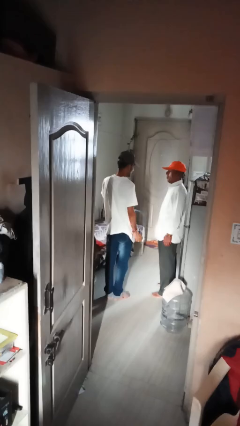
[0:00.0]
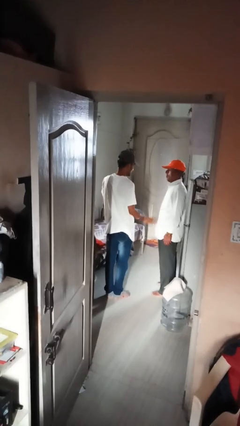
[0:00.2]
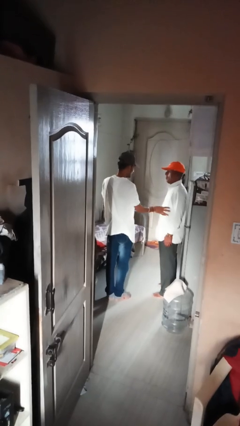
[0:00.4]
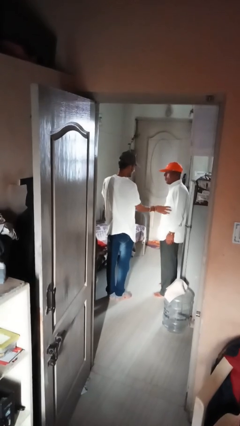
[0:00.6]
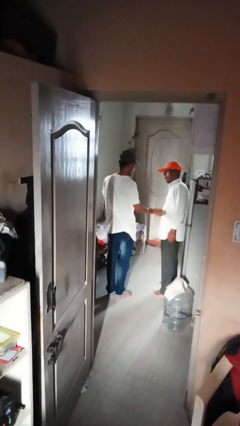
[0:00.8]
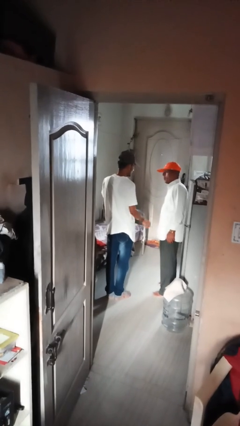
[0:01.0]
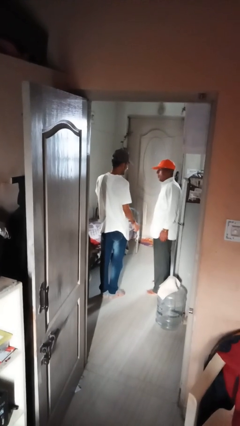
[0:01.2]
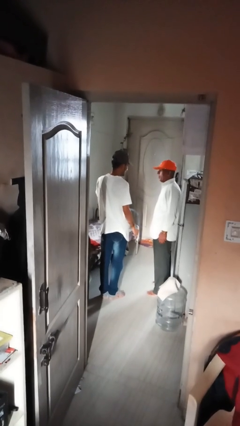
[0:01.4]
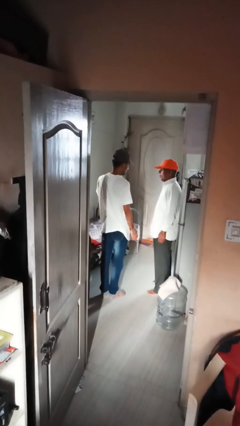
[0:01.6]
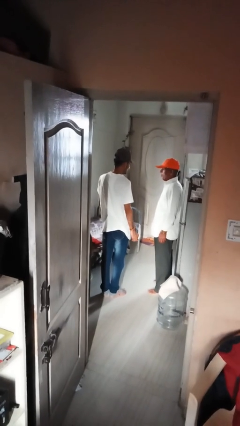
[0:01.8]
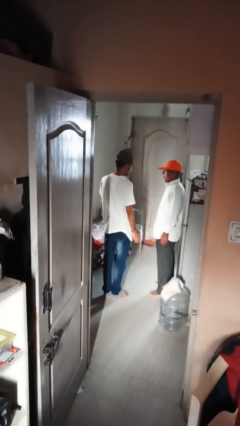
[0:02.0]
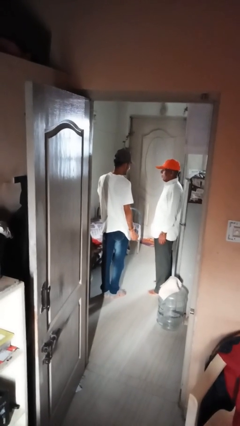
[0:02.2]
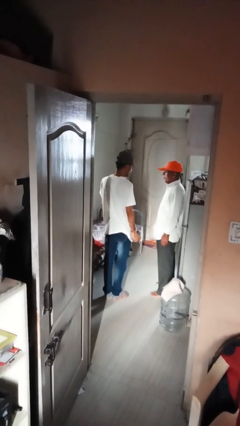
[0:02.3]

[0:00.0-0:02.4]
person tickles person

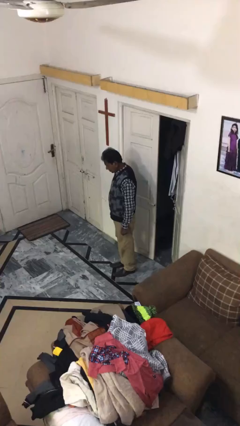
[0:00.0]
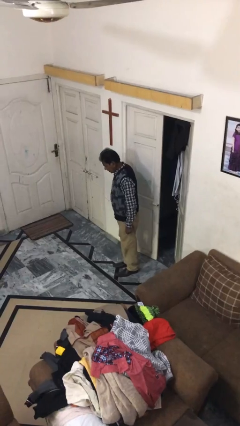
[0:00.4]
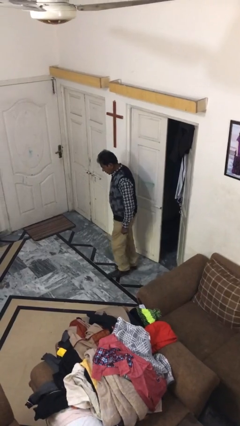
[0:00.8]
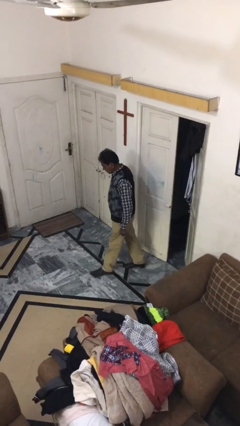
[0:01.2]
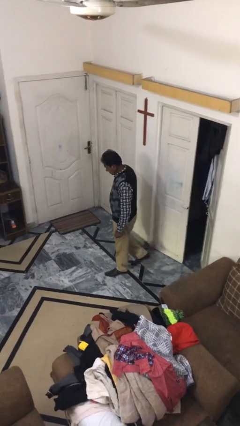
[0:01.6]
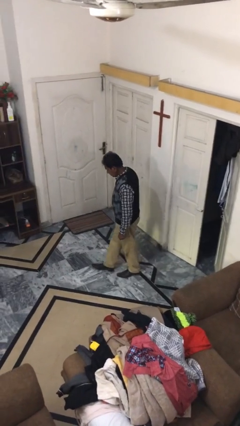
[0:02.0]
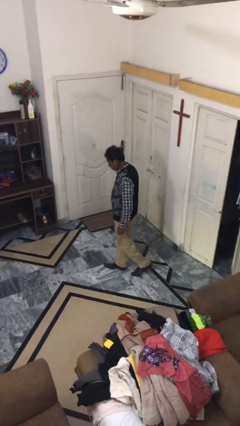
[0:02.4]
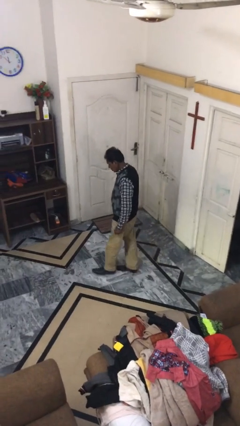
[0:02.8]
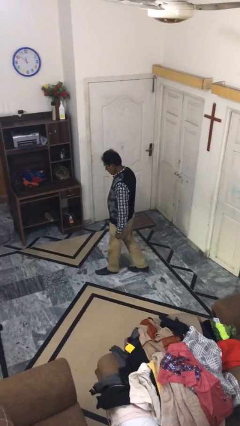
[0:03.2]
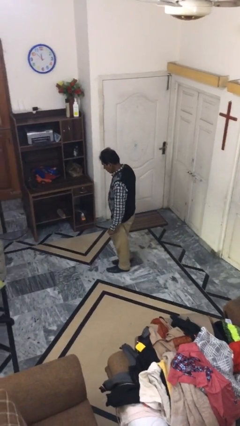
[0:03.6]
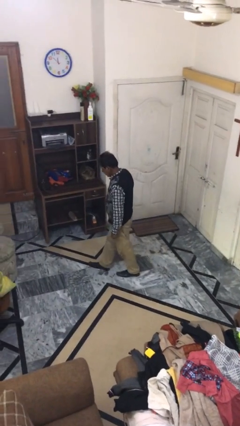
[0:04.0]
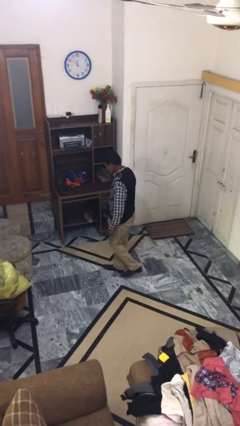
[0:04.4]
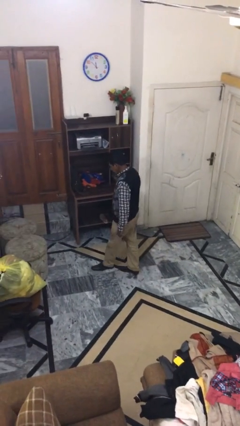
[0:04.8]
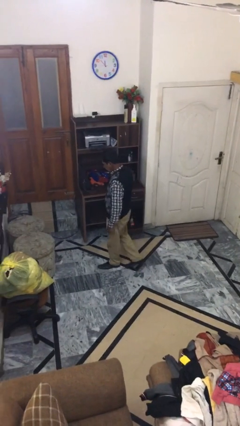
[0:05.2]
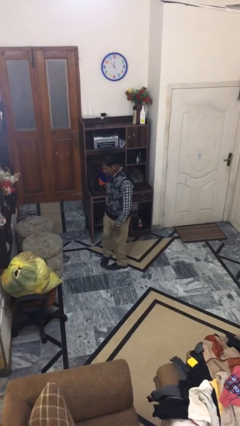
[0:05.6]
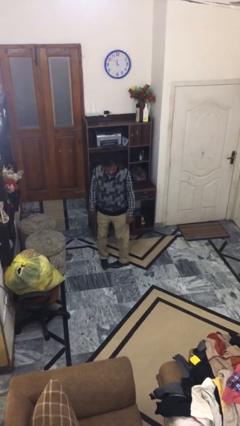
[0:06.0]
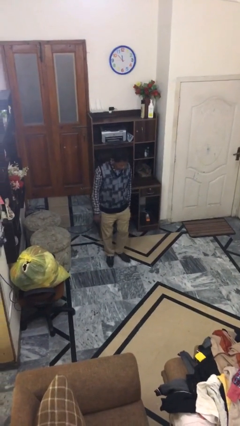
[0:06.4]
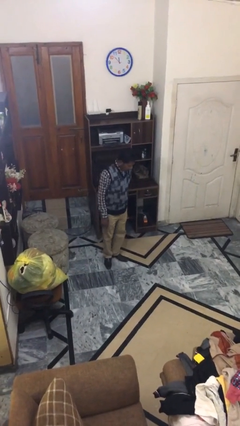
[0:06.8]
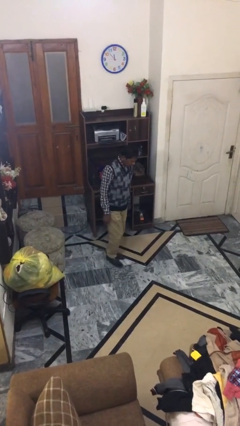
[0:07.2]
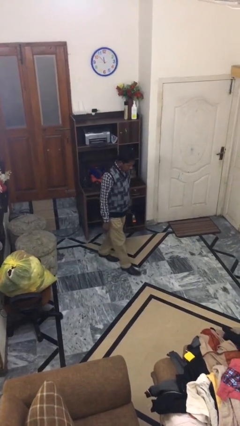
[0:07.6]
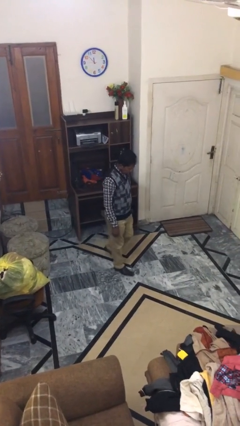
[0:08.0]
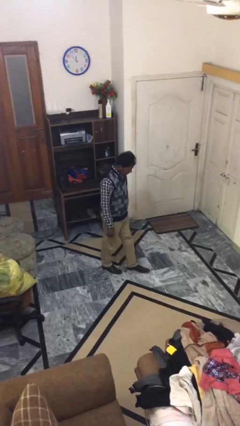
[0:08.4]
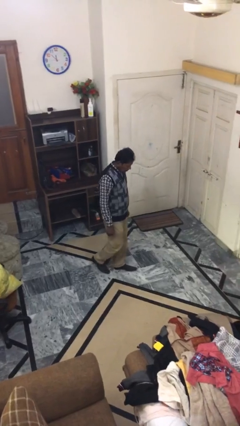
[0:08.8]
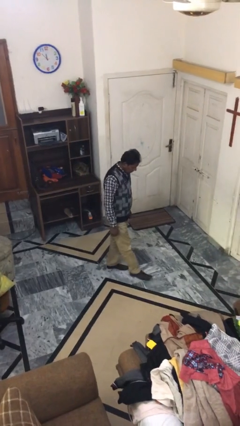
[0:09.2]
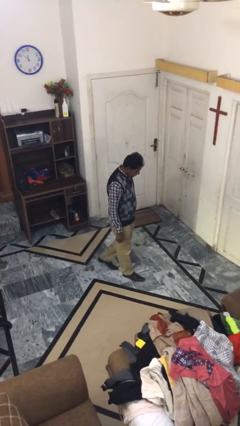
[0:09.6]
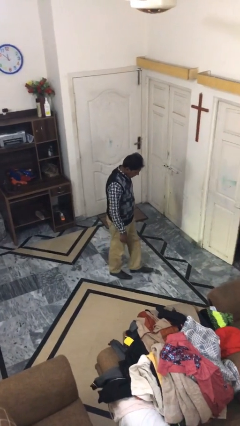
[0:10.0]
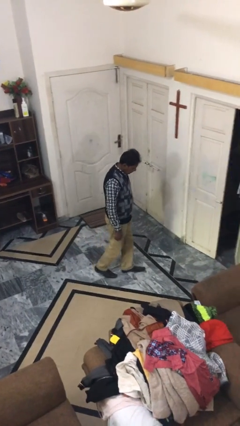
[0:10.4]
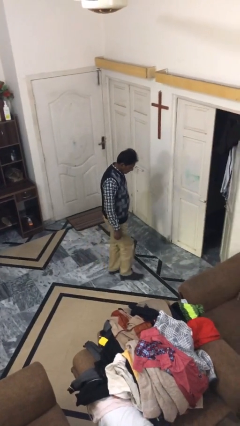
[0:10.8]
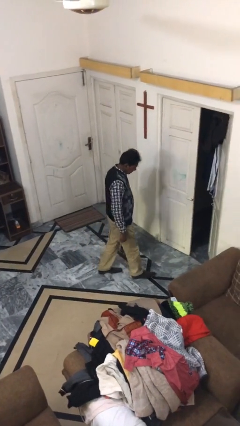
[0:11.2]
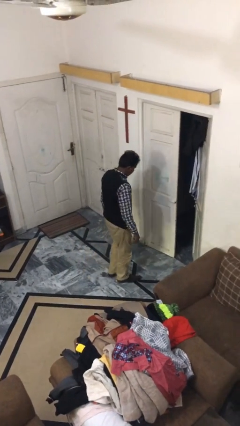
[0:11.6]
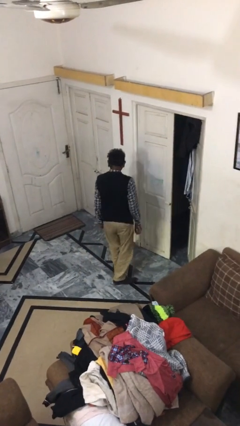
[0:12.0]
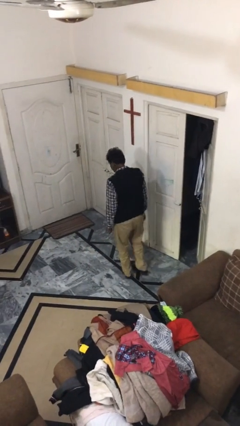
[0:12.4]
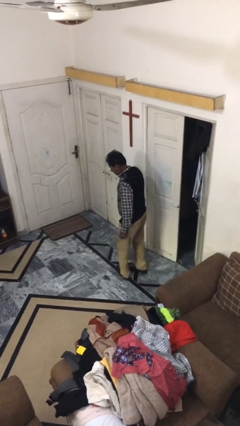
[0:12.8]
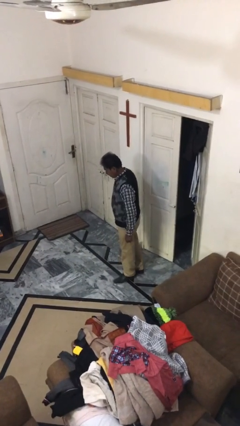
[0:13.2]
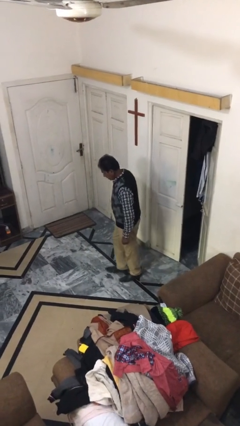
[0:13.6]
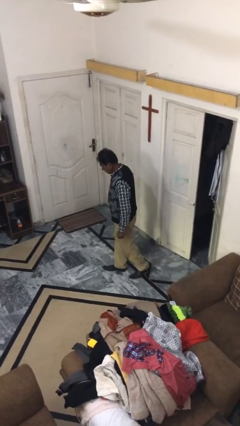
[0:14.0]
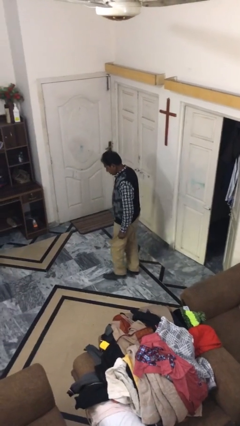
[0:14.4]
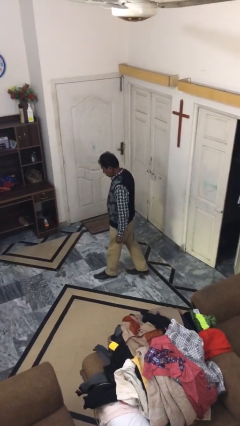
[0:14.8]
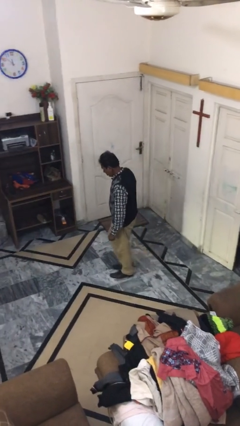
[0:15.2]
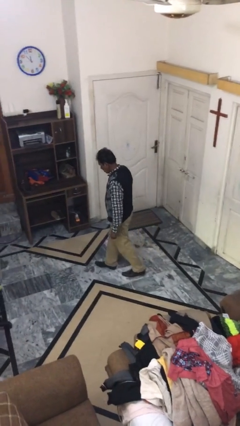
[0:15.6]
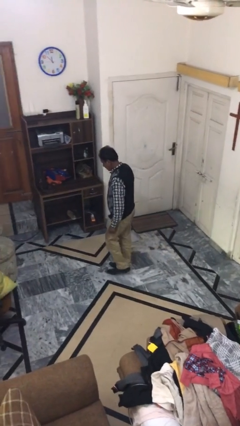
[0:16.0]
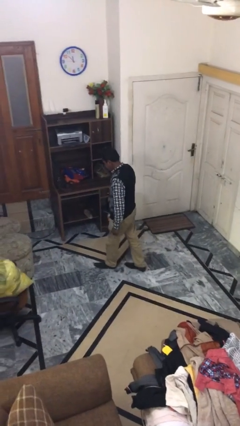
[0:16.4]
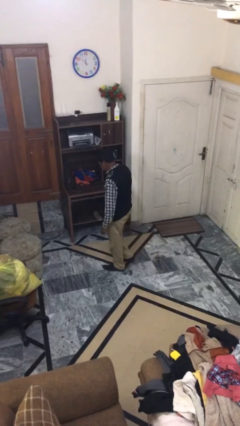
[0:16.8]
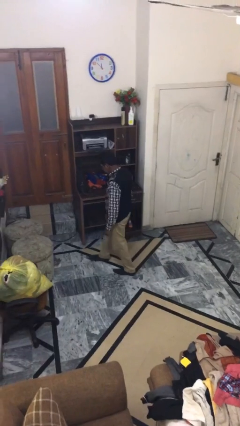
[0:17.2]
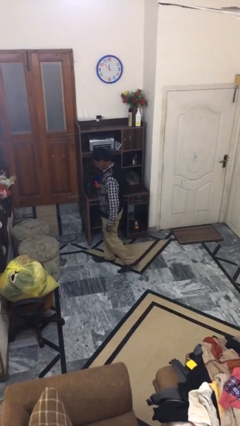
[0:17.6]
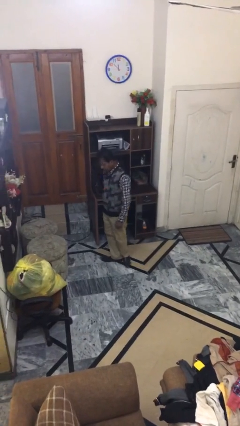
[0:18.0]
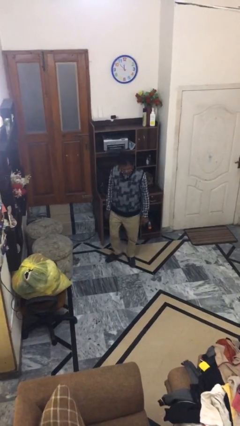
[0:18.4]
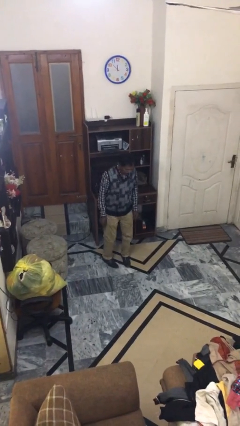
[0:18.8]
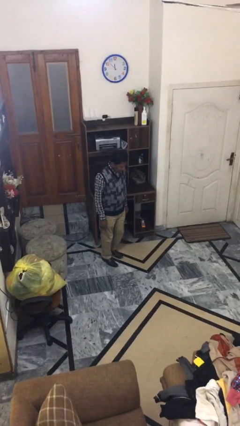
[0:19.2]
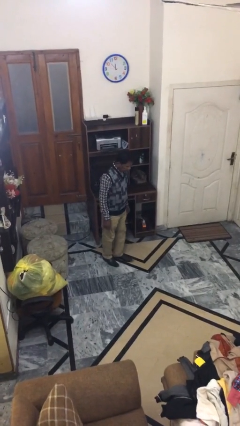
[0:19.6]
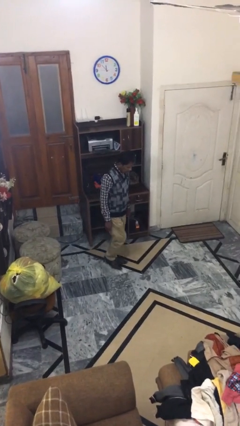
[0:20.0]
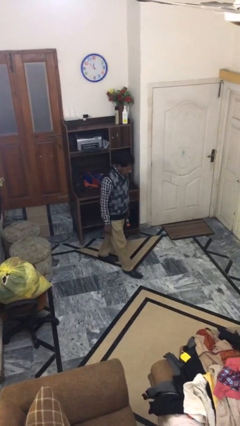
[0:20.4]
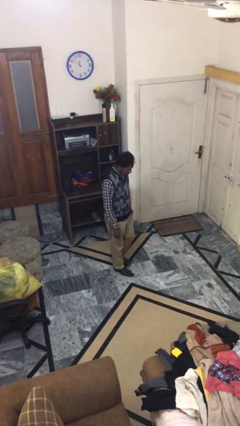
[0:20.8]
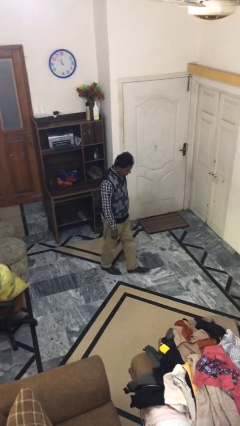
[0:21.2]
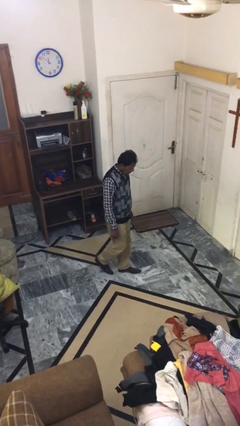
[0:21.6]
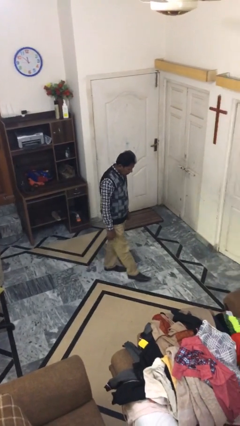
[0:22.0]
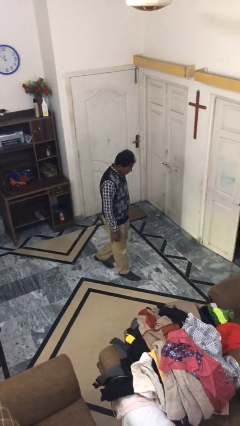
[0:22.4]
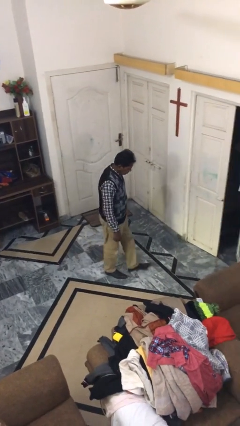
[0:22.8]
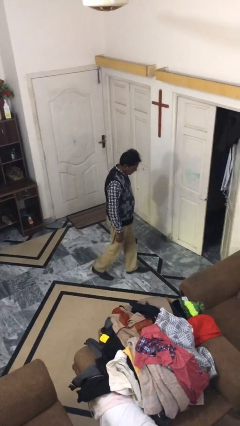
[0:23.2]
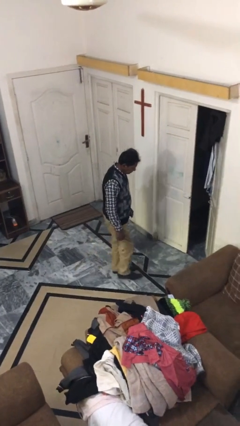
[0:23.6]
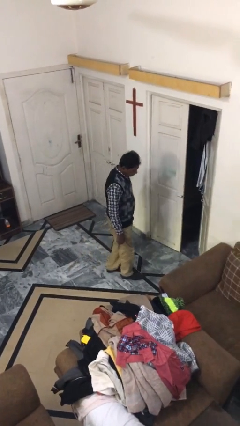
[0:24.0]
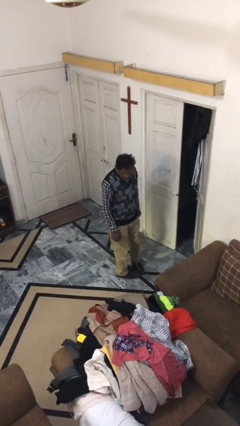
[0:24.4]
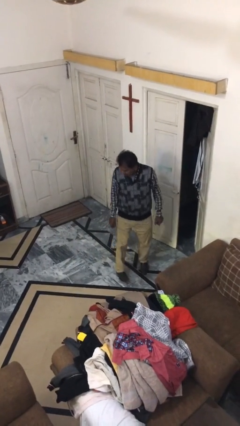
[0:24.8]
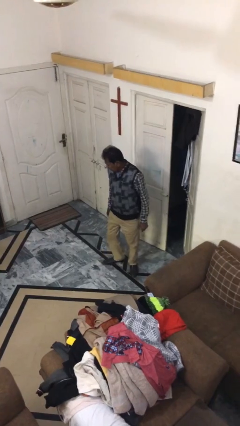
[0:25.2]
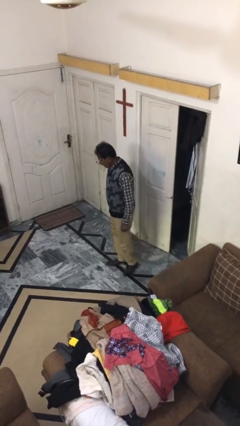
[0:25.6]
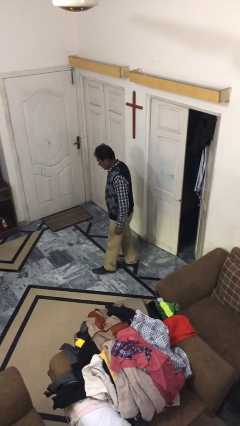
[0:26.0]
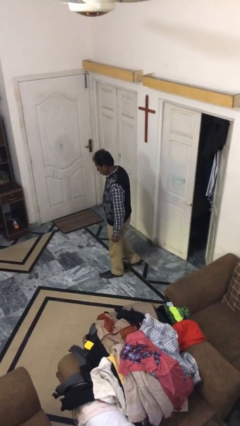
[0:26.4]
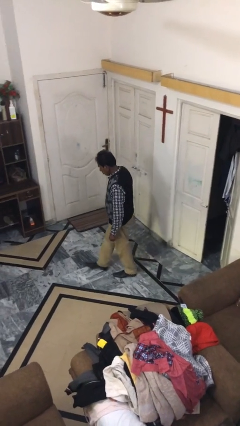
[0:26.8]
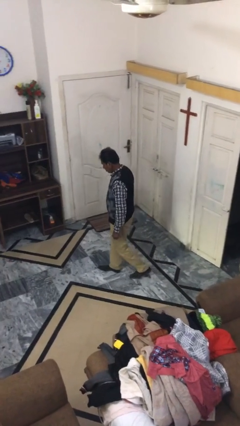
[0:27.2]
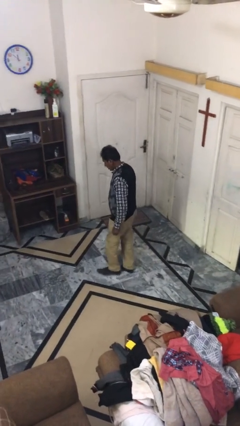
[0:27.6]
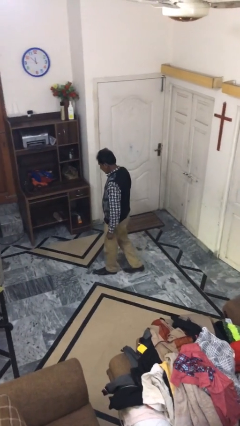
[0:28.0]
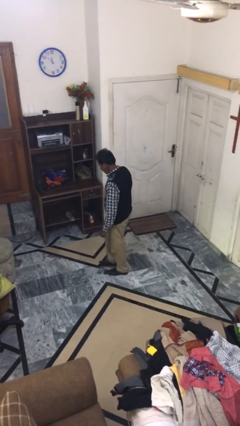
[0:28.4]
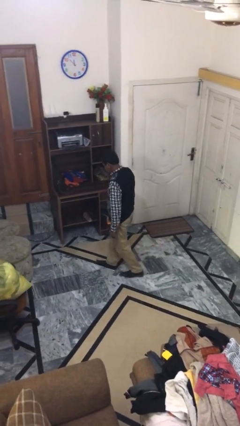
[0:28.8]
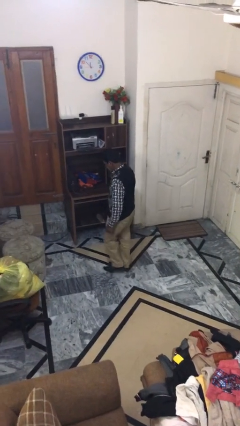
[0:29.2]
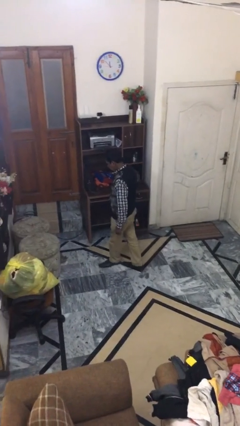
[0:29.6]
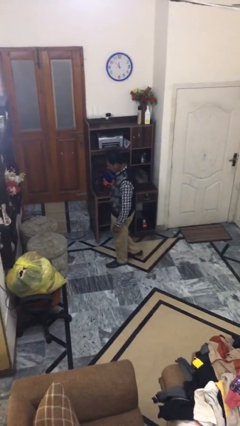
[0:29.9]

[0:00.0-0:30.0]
person walks

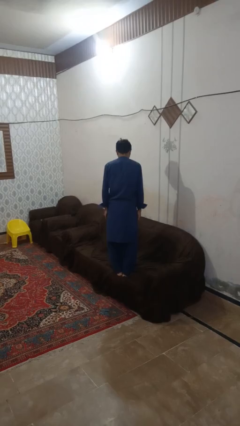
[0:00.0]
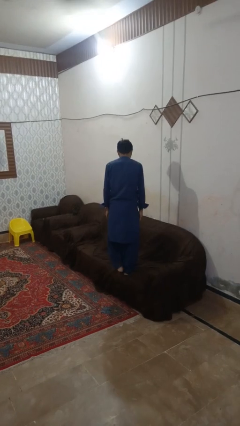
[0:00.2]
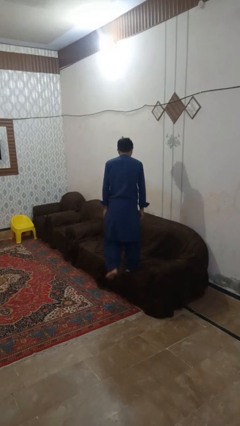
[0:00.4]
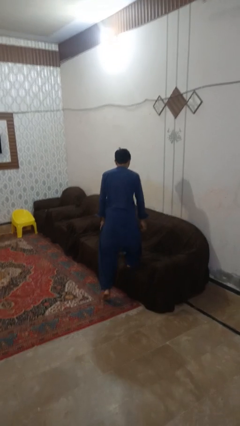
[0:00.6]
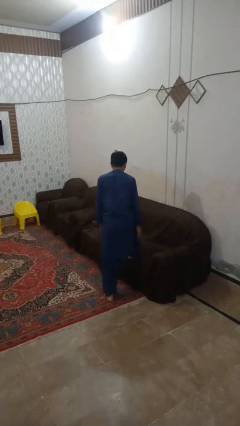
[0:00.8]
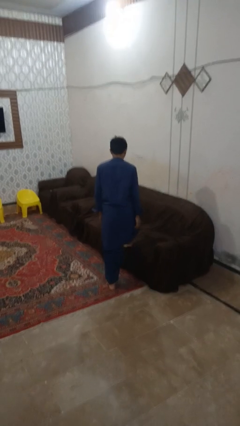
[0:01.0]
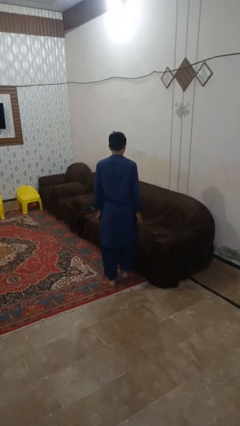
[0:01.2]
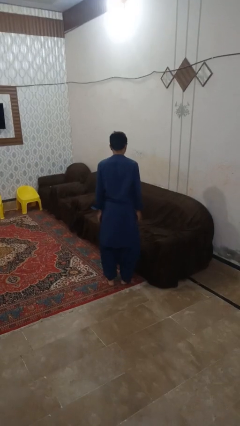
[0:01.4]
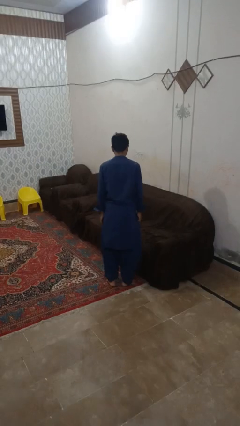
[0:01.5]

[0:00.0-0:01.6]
person climbs off couch
